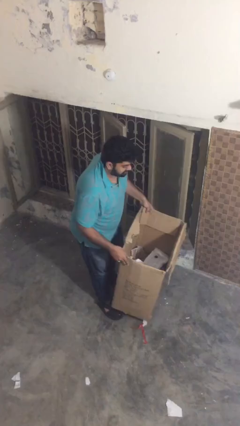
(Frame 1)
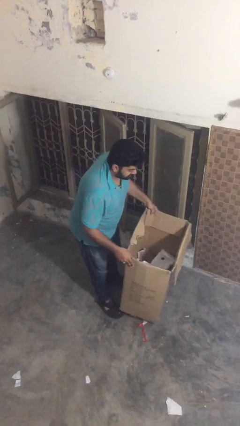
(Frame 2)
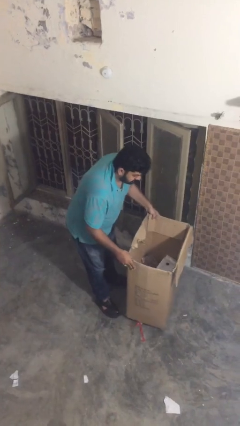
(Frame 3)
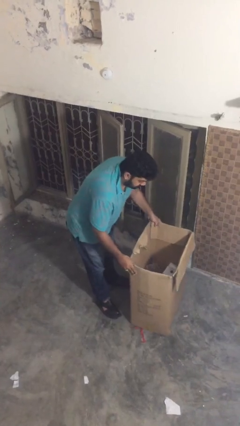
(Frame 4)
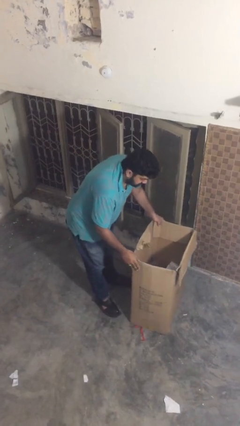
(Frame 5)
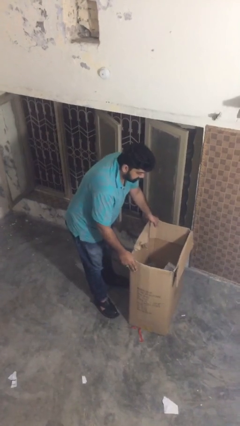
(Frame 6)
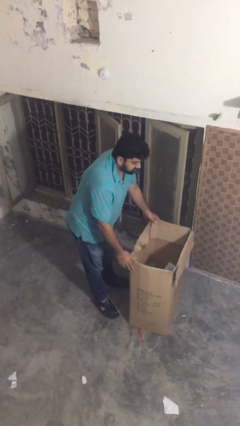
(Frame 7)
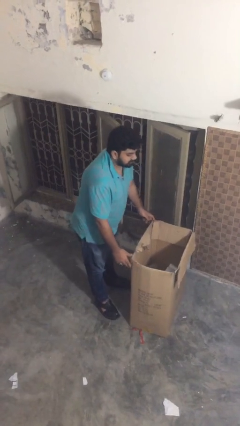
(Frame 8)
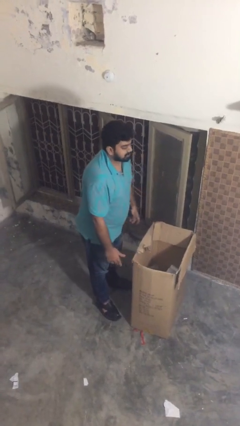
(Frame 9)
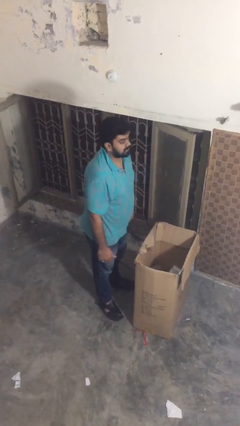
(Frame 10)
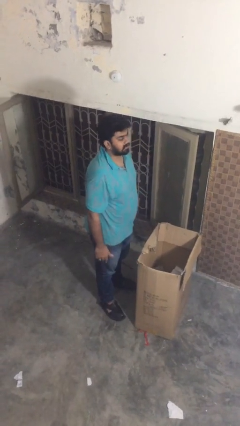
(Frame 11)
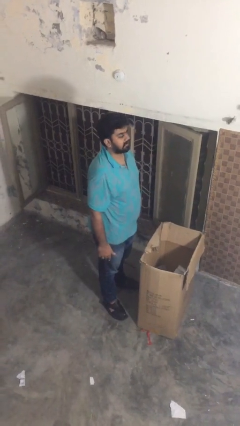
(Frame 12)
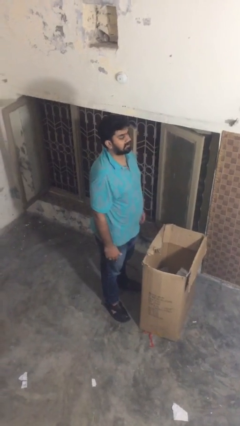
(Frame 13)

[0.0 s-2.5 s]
person puts down object on floor

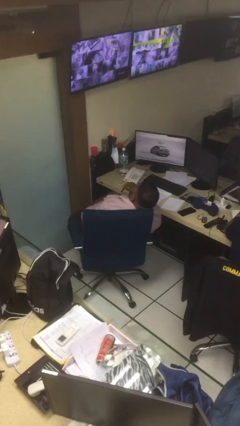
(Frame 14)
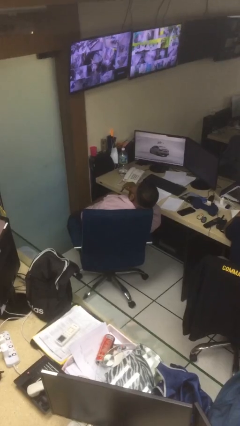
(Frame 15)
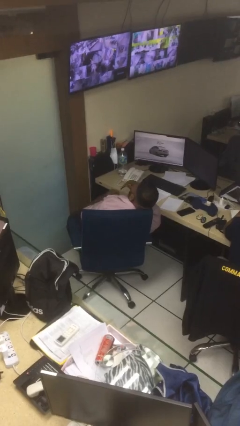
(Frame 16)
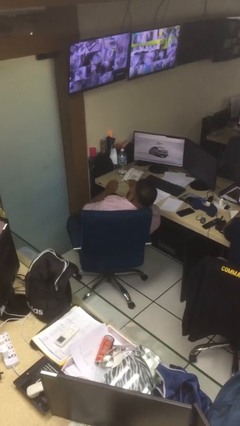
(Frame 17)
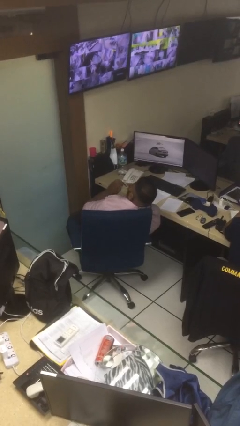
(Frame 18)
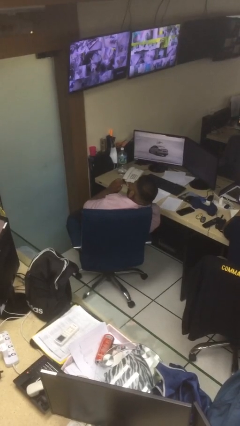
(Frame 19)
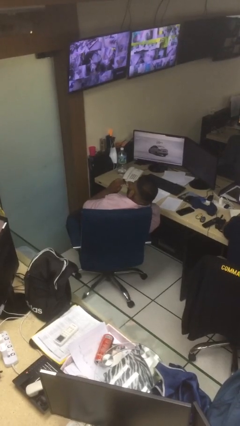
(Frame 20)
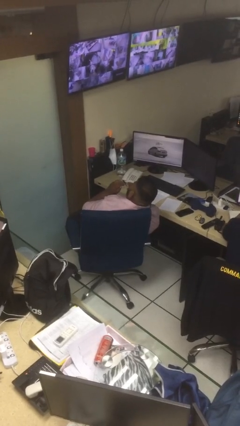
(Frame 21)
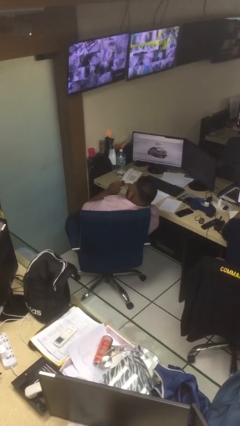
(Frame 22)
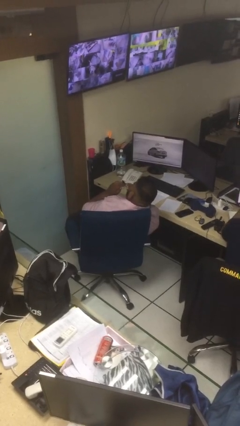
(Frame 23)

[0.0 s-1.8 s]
person files fingernails

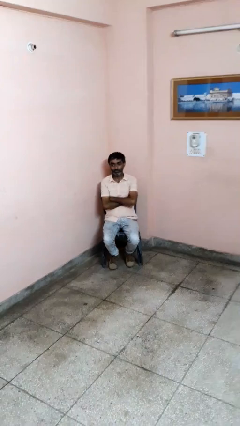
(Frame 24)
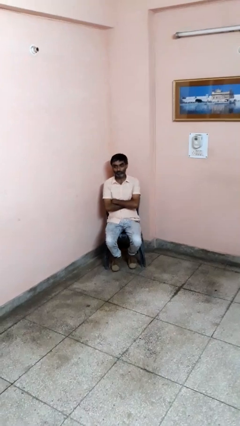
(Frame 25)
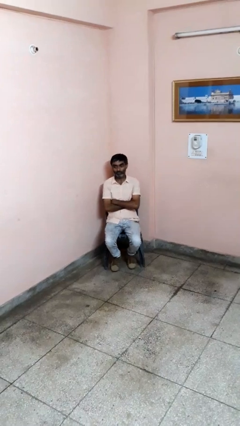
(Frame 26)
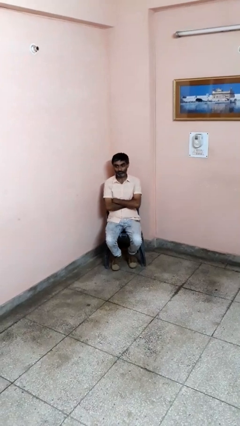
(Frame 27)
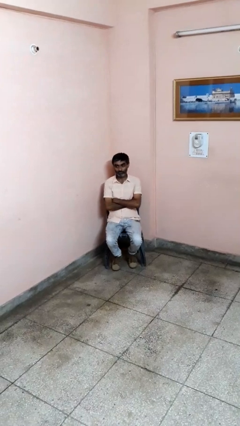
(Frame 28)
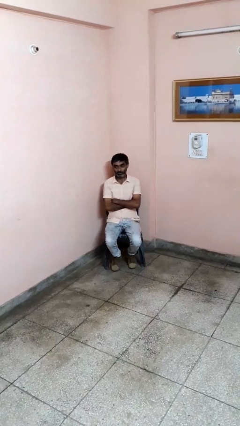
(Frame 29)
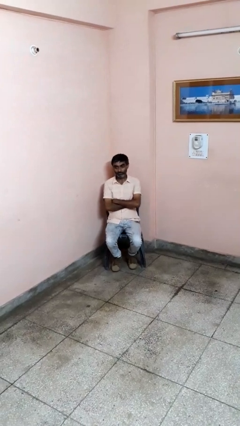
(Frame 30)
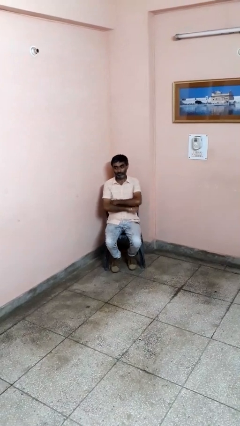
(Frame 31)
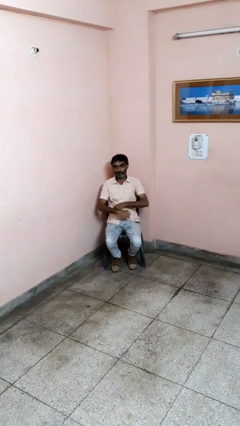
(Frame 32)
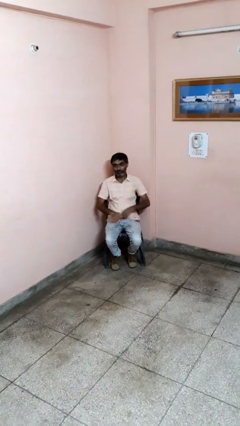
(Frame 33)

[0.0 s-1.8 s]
person crosses arms

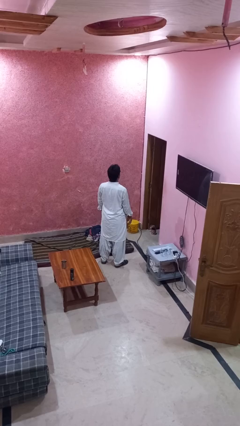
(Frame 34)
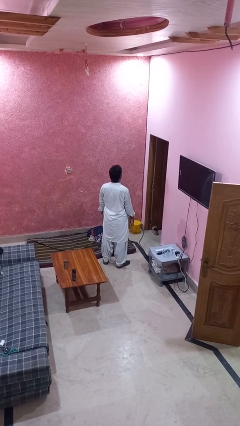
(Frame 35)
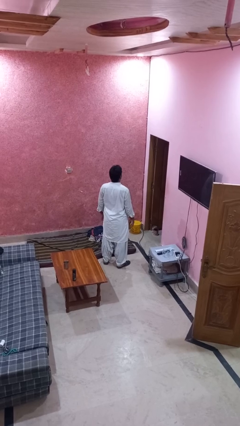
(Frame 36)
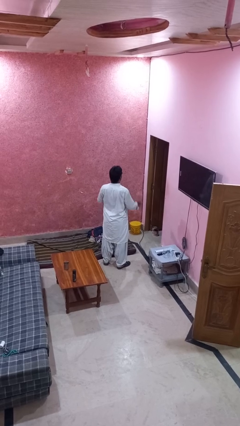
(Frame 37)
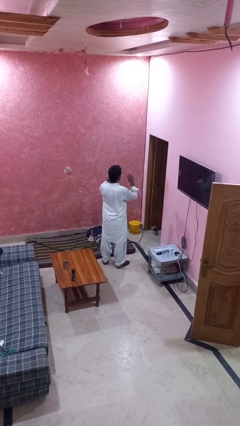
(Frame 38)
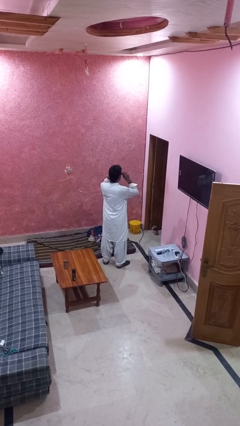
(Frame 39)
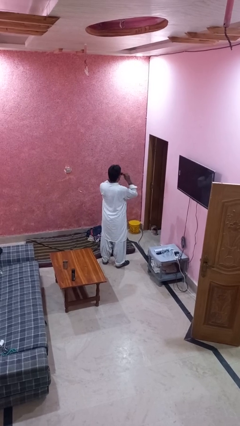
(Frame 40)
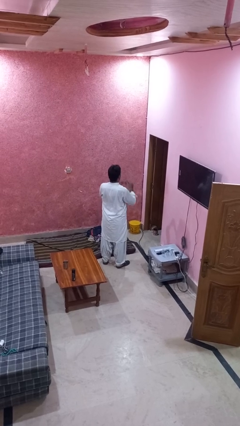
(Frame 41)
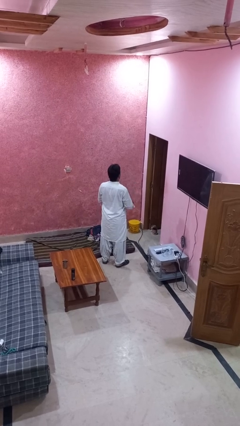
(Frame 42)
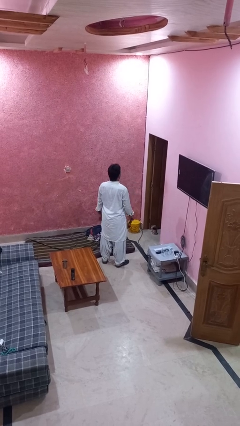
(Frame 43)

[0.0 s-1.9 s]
person takes off sunglasses

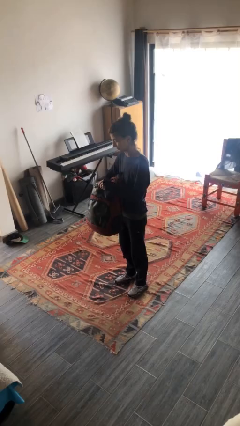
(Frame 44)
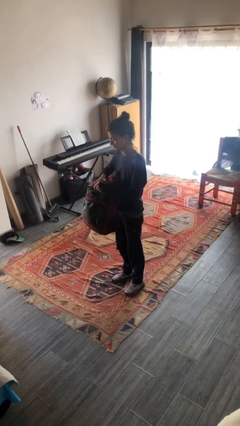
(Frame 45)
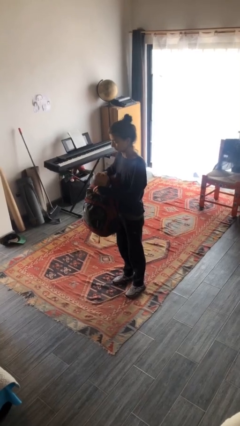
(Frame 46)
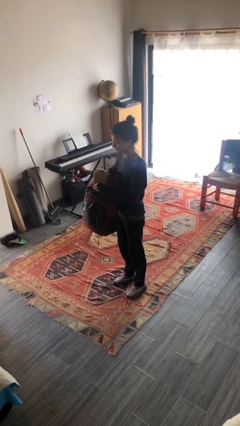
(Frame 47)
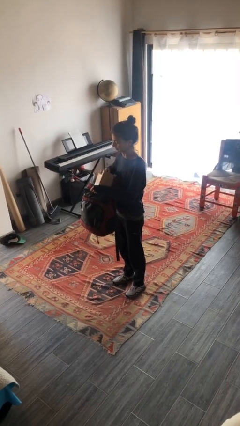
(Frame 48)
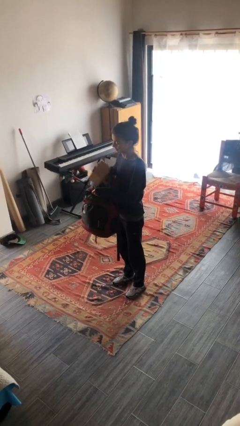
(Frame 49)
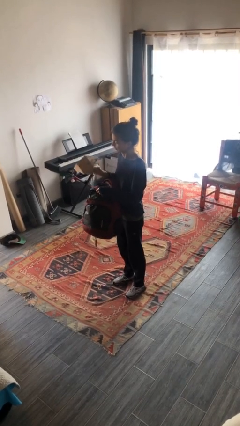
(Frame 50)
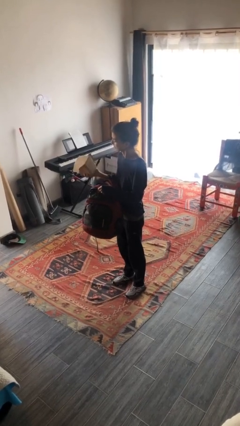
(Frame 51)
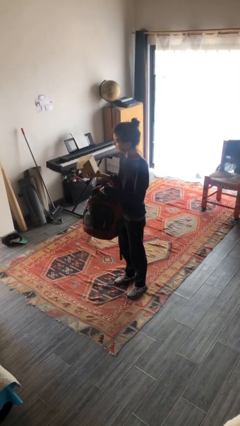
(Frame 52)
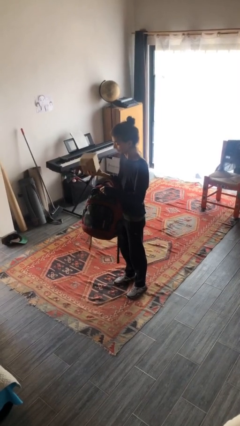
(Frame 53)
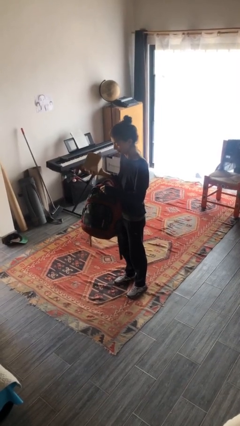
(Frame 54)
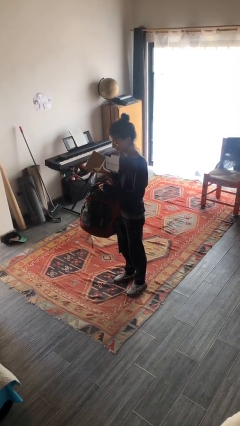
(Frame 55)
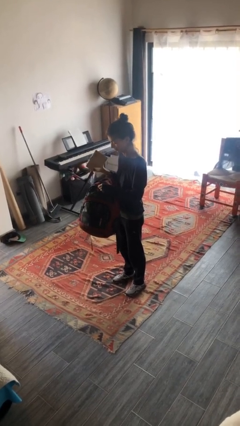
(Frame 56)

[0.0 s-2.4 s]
person takes object from backpack

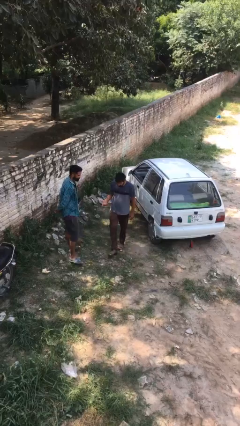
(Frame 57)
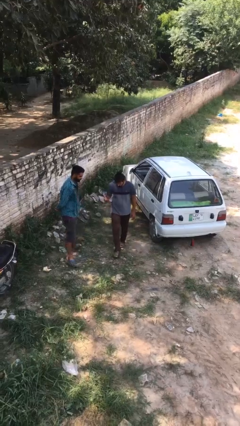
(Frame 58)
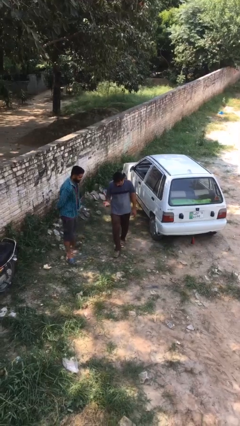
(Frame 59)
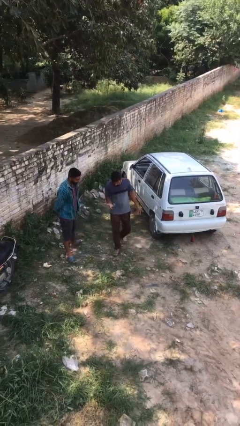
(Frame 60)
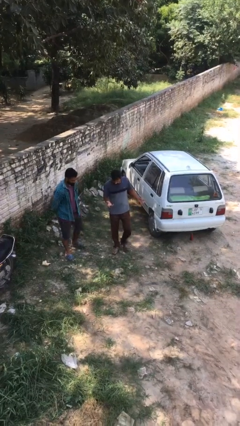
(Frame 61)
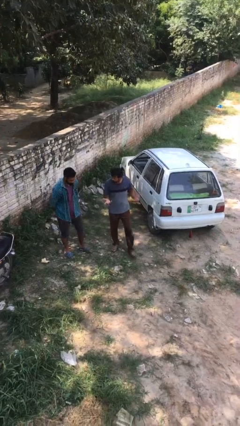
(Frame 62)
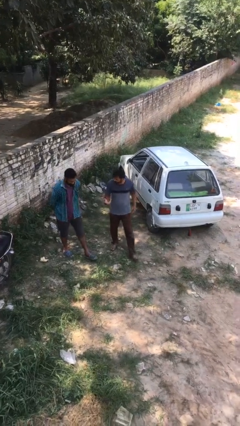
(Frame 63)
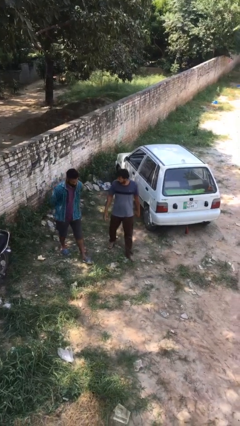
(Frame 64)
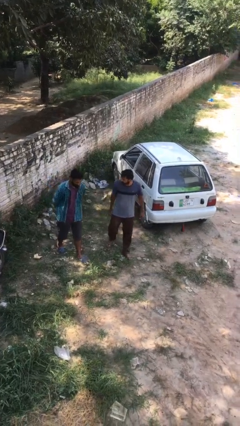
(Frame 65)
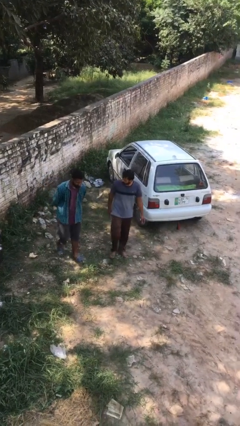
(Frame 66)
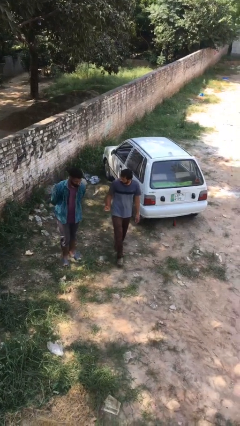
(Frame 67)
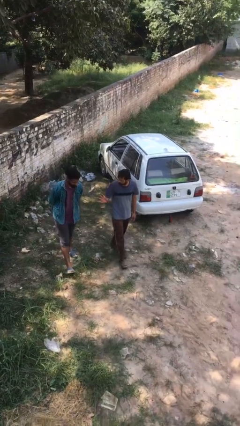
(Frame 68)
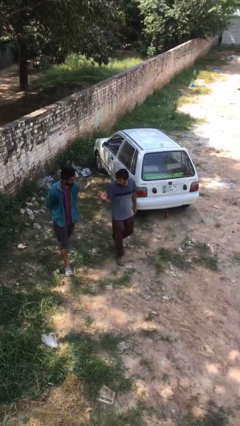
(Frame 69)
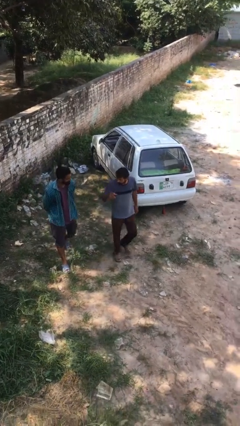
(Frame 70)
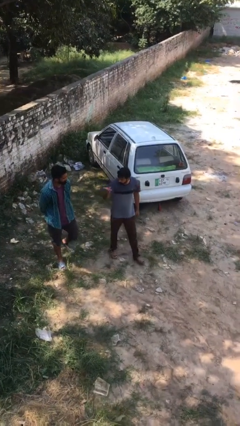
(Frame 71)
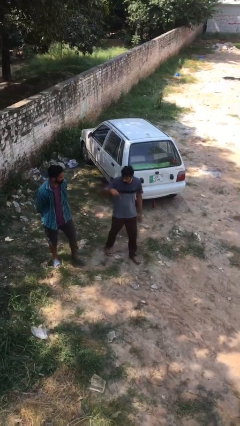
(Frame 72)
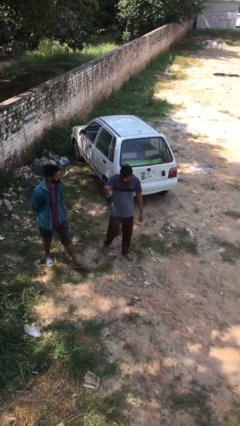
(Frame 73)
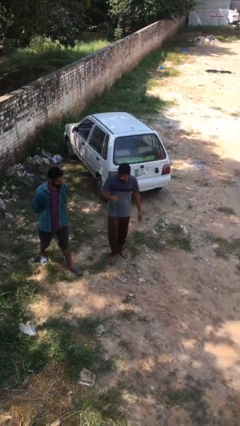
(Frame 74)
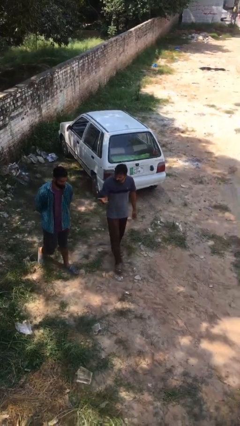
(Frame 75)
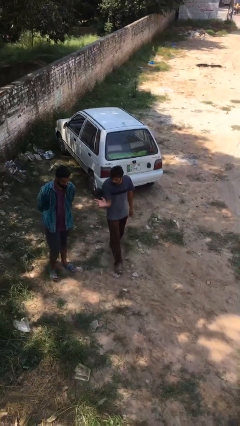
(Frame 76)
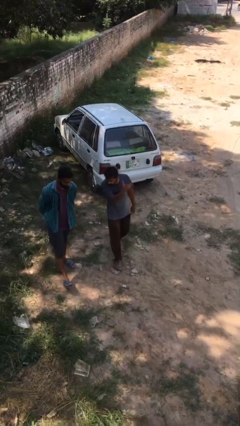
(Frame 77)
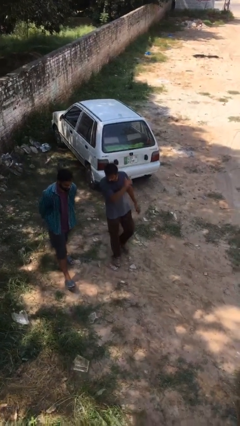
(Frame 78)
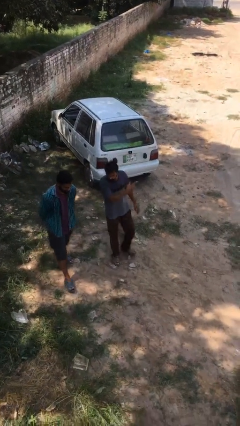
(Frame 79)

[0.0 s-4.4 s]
person talks to person

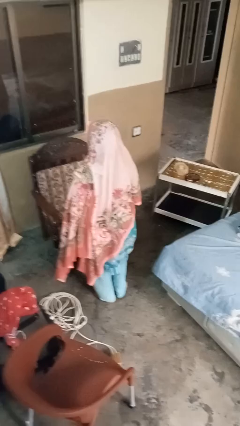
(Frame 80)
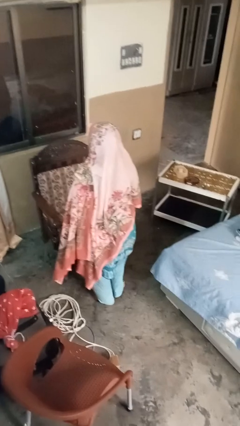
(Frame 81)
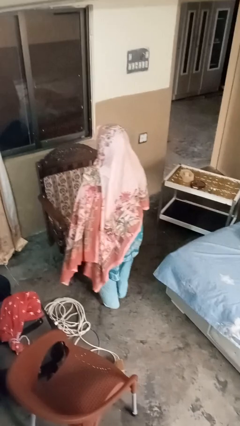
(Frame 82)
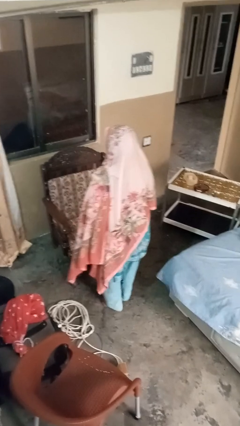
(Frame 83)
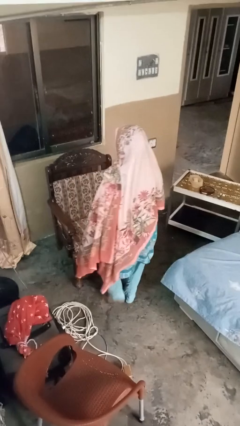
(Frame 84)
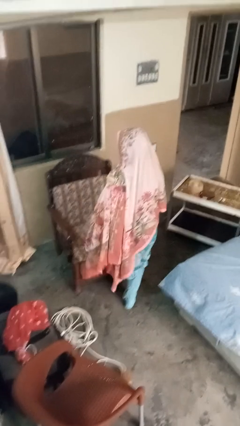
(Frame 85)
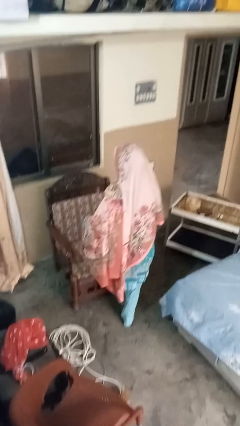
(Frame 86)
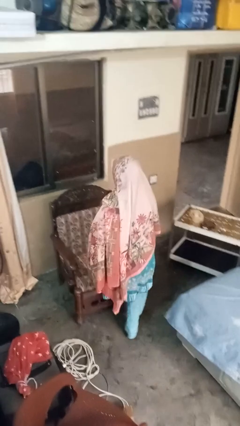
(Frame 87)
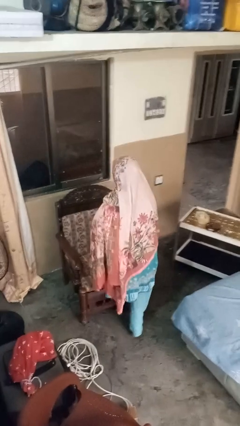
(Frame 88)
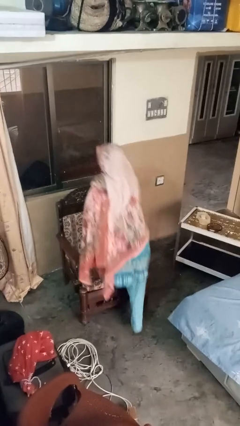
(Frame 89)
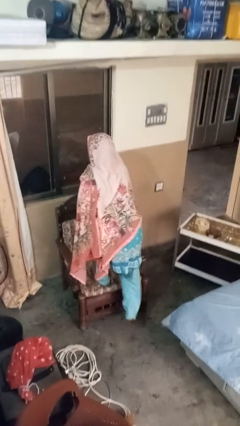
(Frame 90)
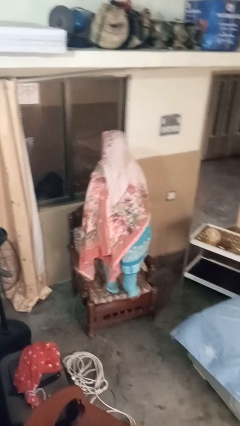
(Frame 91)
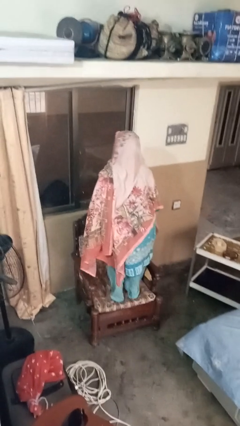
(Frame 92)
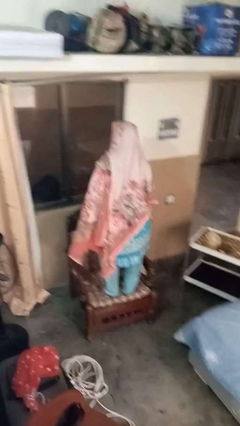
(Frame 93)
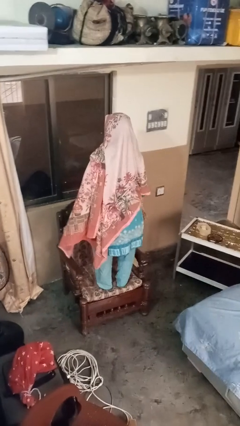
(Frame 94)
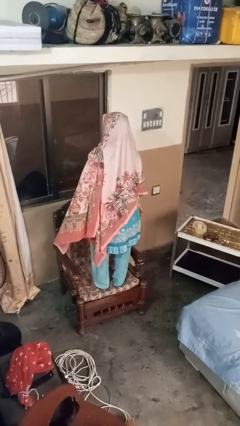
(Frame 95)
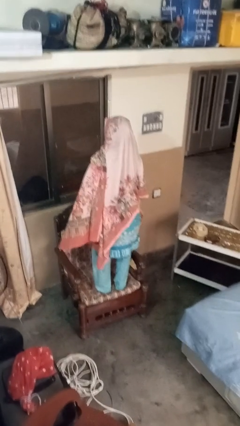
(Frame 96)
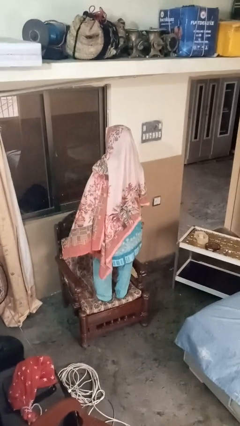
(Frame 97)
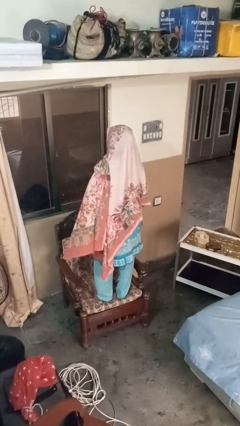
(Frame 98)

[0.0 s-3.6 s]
person climbs on couch
